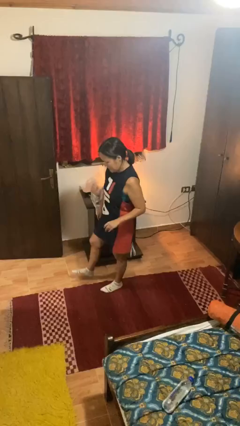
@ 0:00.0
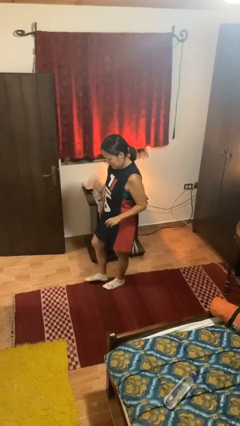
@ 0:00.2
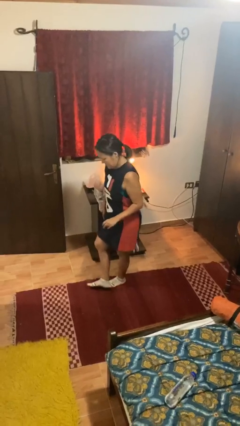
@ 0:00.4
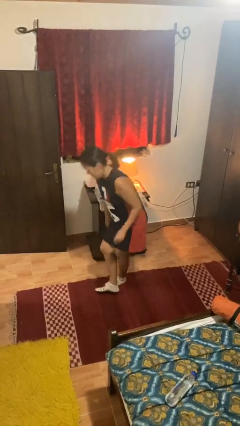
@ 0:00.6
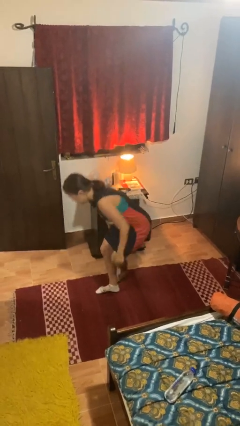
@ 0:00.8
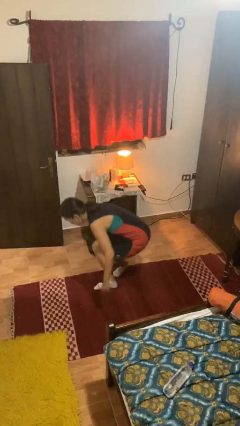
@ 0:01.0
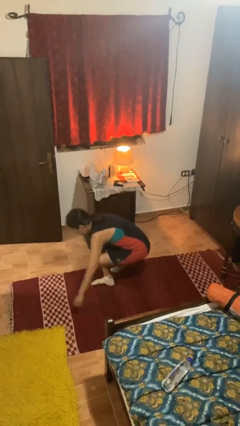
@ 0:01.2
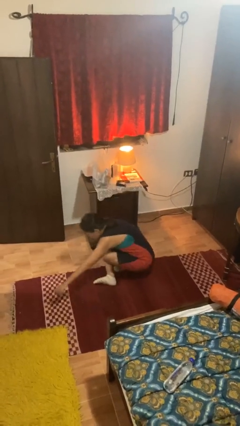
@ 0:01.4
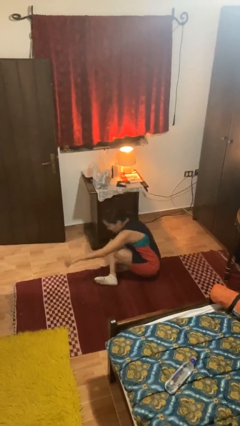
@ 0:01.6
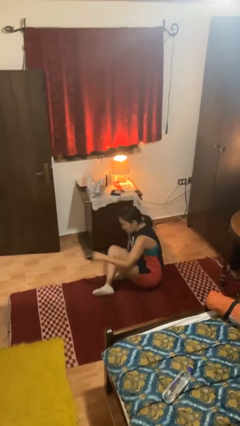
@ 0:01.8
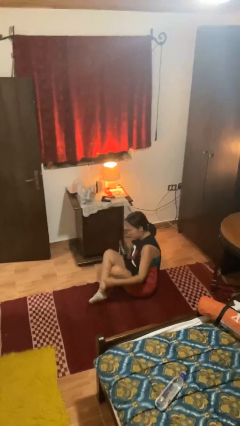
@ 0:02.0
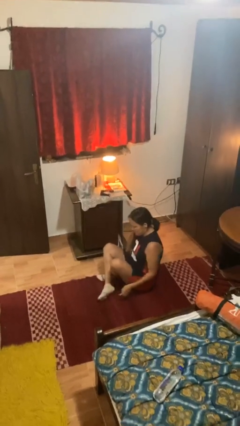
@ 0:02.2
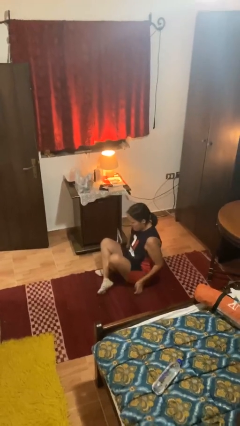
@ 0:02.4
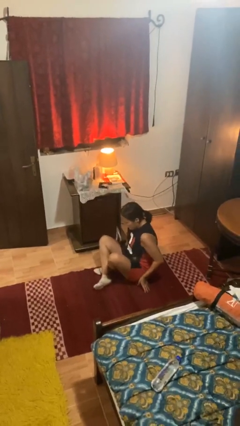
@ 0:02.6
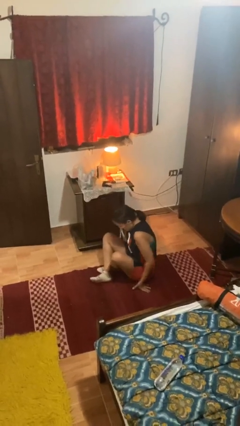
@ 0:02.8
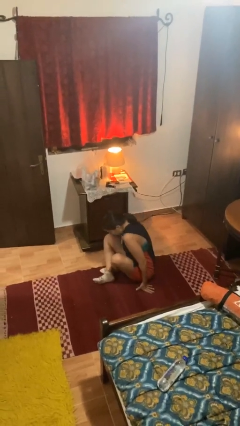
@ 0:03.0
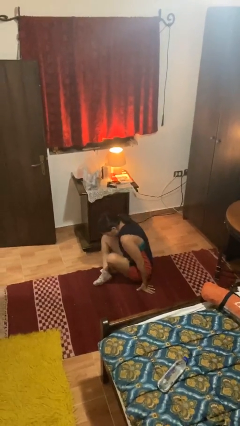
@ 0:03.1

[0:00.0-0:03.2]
person sits crisscross

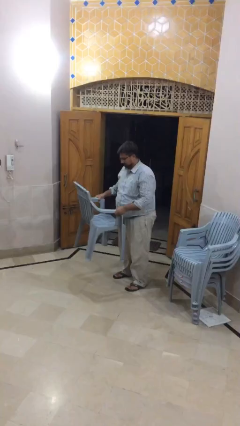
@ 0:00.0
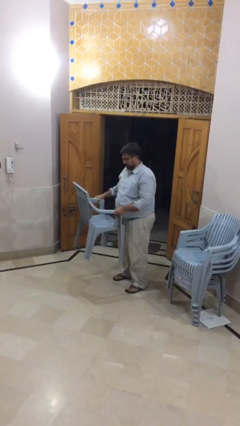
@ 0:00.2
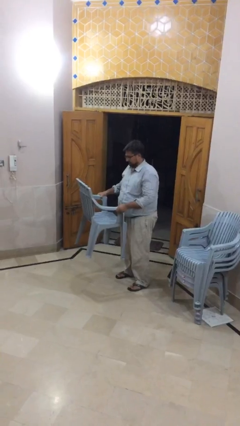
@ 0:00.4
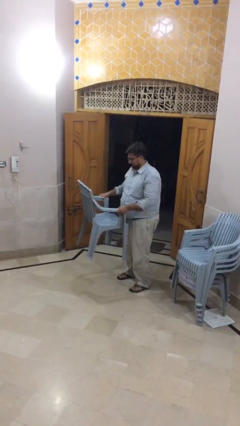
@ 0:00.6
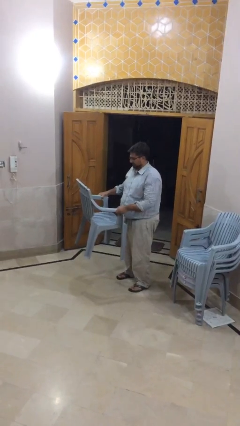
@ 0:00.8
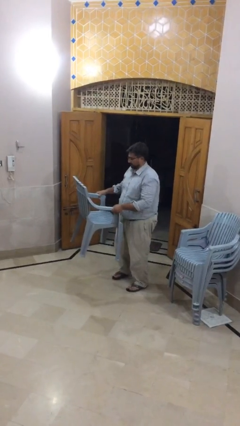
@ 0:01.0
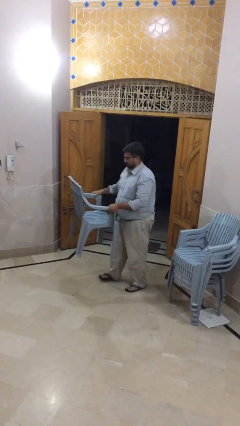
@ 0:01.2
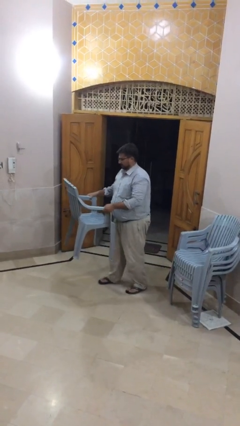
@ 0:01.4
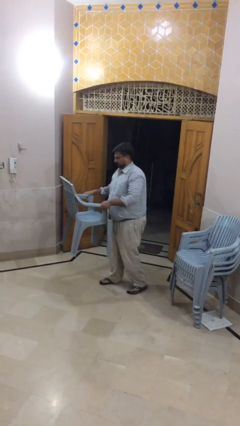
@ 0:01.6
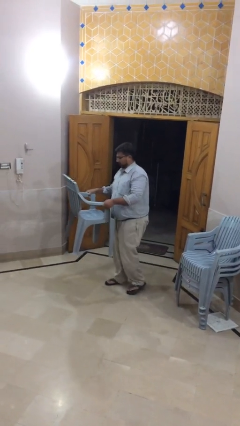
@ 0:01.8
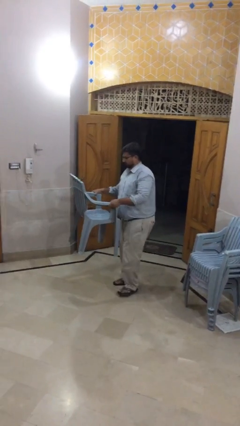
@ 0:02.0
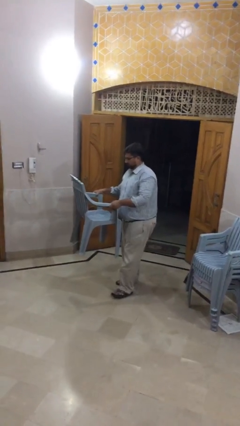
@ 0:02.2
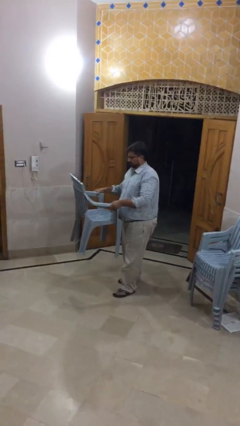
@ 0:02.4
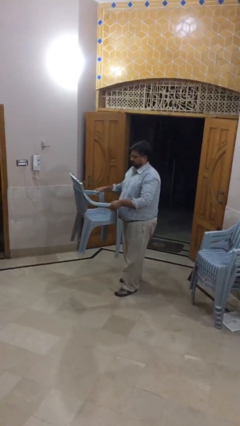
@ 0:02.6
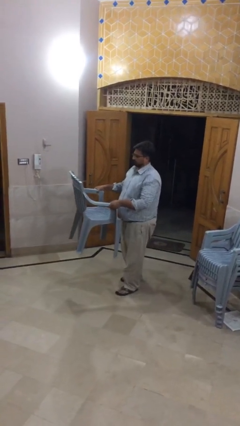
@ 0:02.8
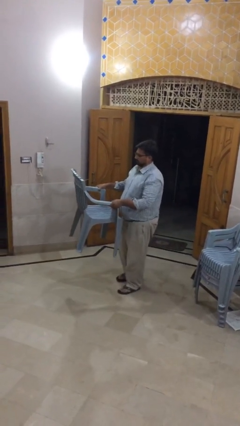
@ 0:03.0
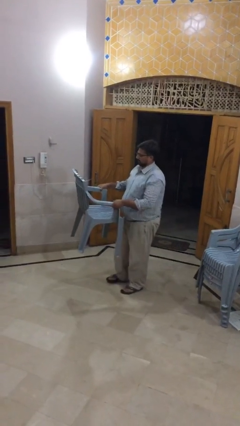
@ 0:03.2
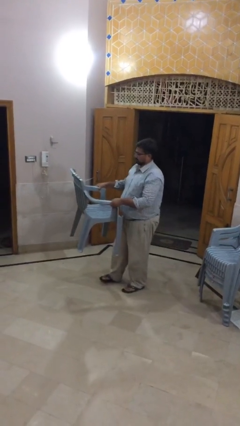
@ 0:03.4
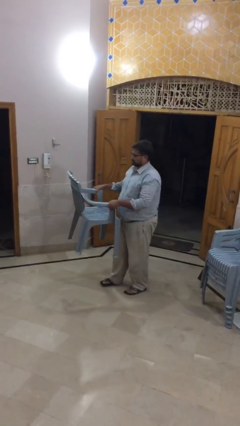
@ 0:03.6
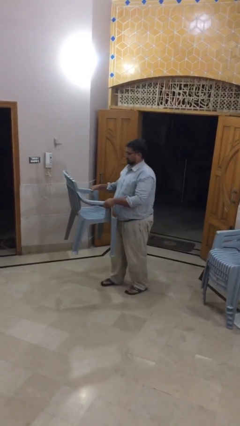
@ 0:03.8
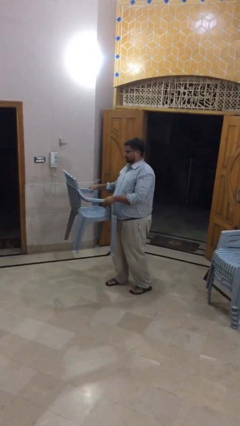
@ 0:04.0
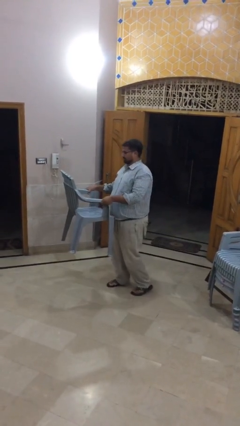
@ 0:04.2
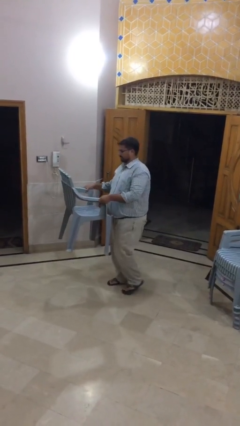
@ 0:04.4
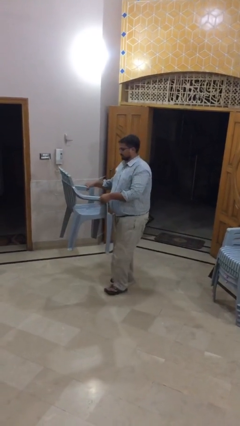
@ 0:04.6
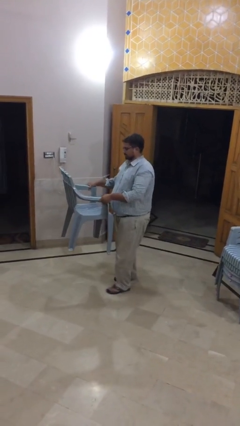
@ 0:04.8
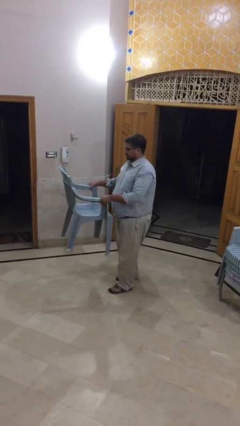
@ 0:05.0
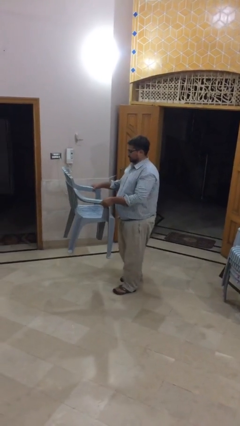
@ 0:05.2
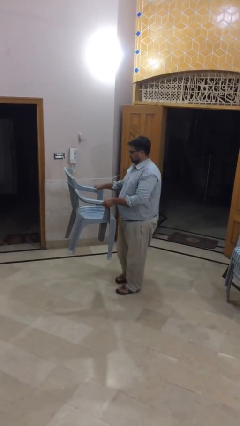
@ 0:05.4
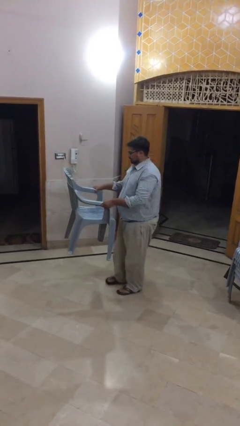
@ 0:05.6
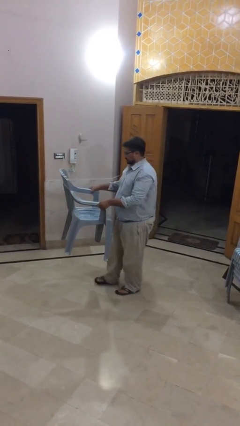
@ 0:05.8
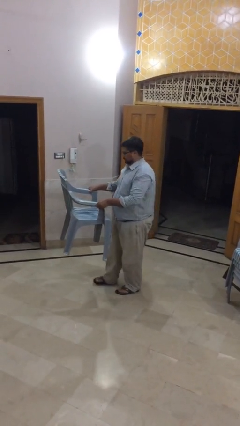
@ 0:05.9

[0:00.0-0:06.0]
person carries heavy object

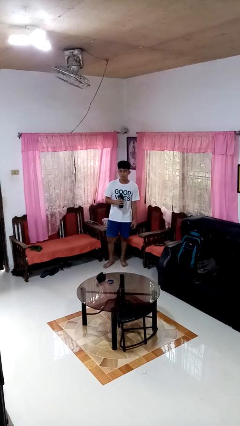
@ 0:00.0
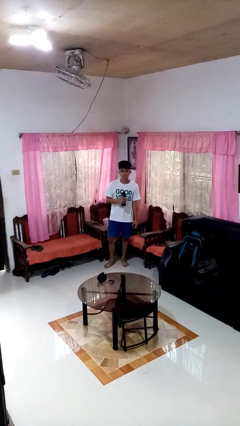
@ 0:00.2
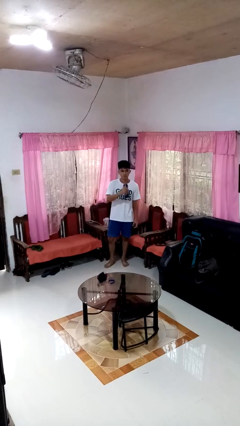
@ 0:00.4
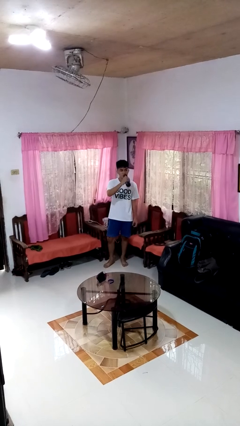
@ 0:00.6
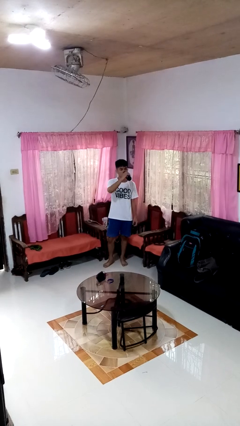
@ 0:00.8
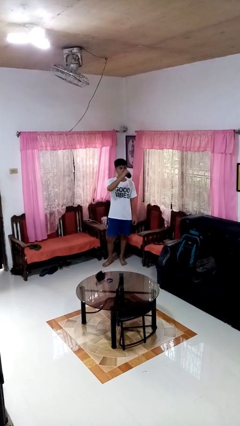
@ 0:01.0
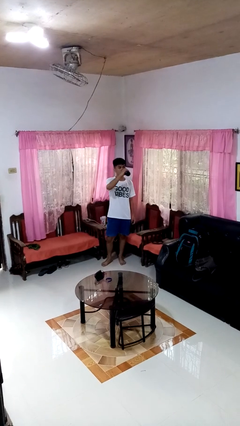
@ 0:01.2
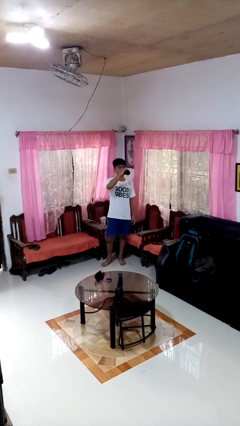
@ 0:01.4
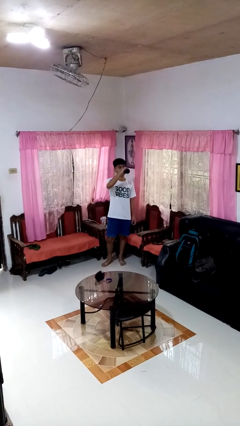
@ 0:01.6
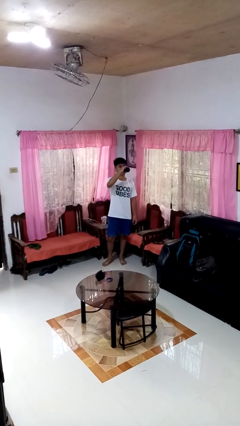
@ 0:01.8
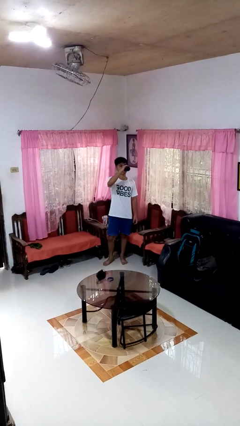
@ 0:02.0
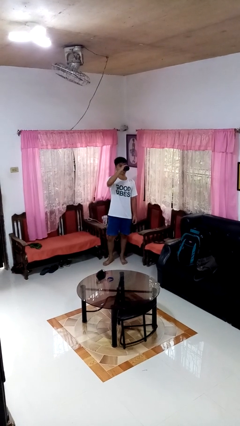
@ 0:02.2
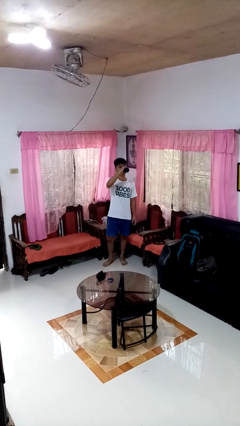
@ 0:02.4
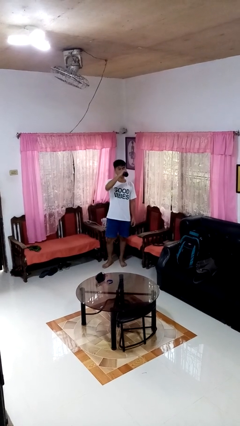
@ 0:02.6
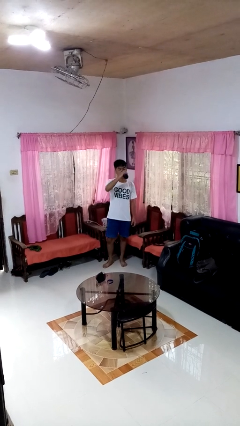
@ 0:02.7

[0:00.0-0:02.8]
person drinks from bottle

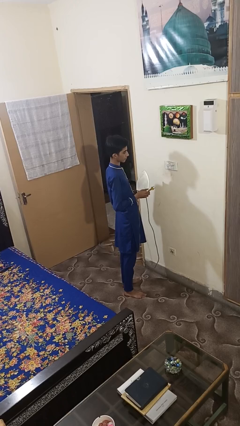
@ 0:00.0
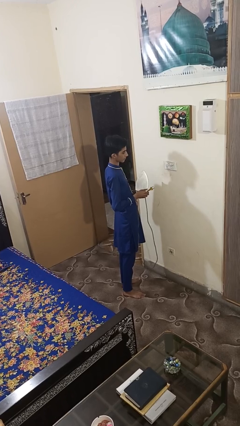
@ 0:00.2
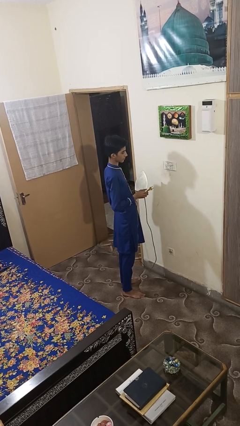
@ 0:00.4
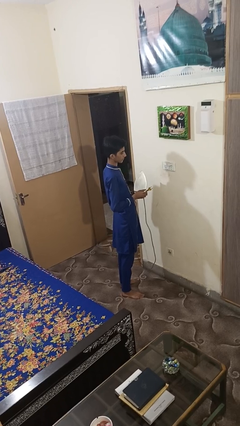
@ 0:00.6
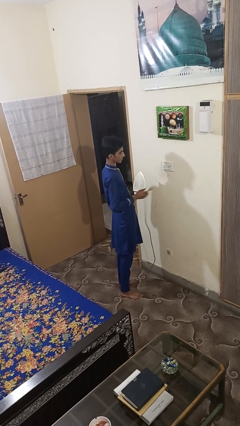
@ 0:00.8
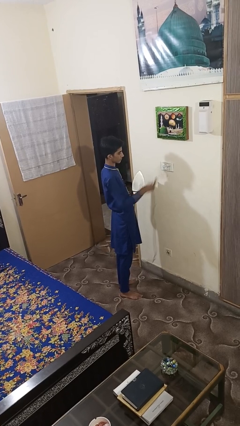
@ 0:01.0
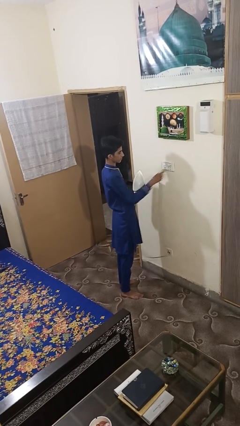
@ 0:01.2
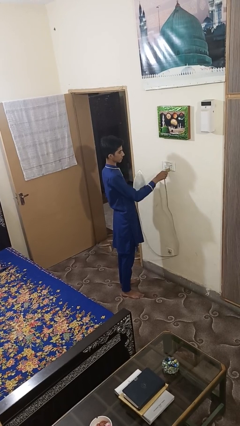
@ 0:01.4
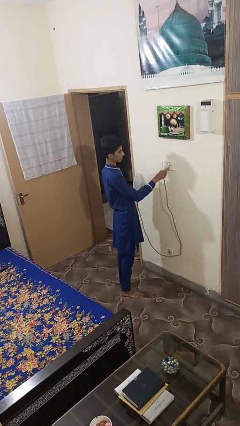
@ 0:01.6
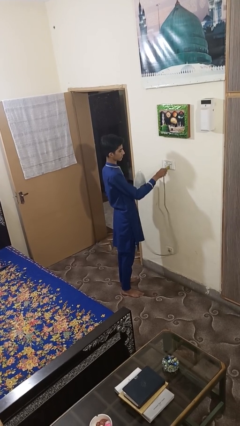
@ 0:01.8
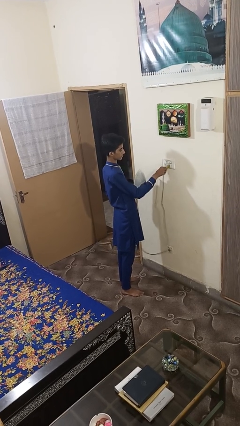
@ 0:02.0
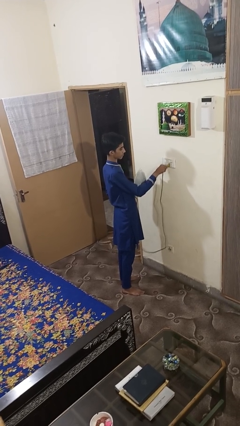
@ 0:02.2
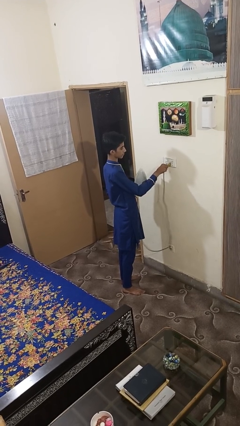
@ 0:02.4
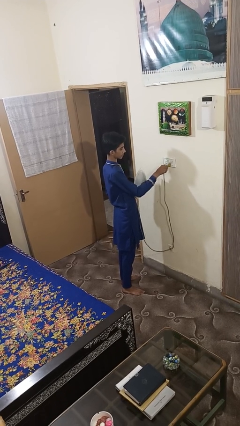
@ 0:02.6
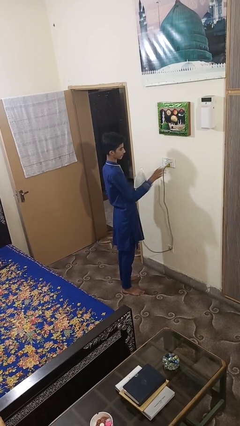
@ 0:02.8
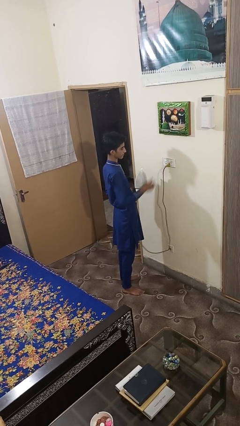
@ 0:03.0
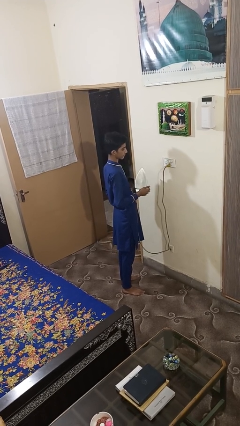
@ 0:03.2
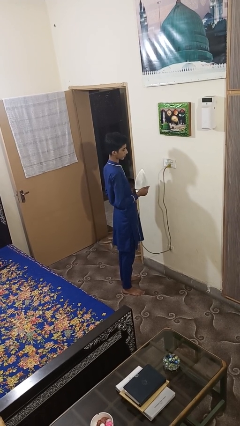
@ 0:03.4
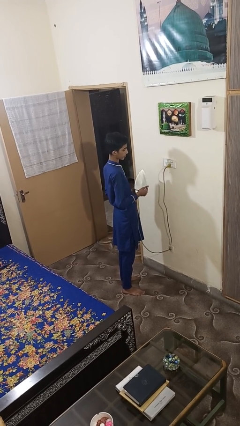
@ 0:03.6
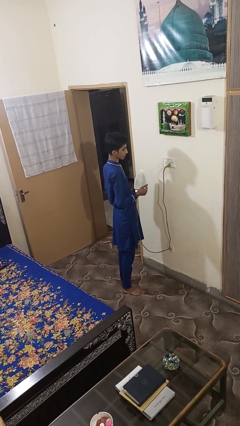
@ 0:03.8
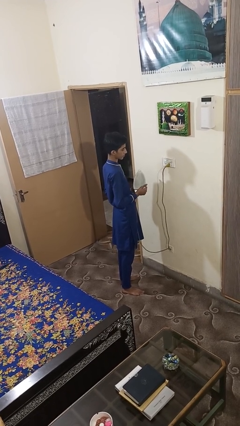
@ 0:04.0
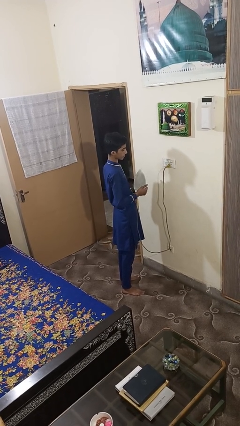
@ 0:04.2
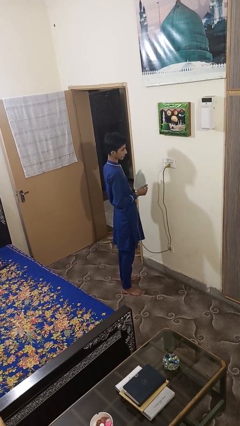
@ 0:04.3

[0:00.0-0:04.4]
person plugs into electrical socket

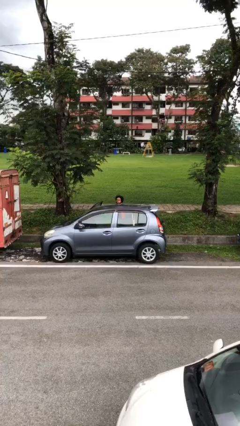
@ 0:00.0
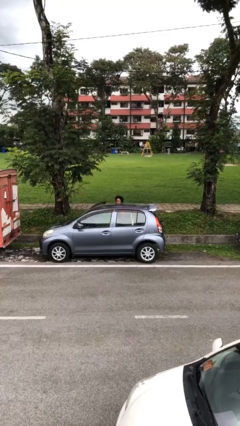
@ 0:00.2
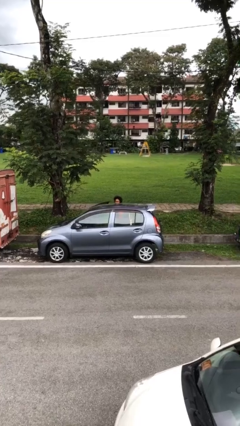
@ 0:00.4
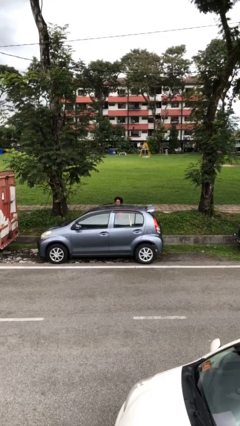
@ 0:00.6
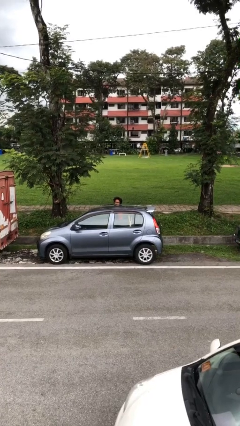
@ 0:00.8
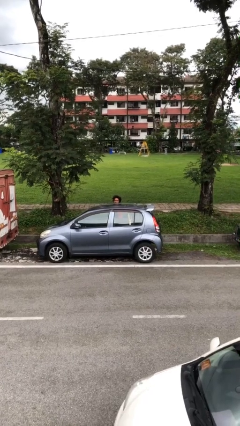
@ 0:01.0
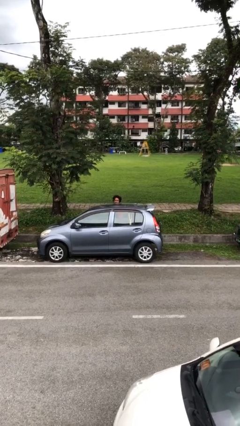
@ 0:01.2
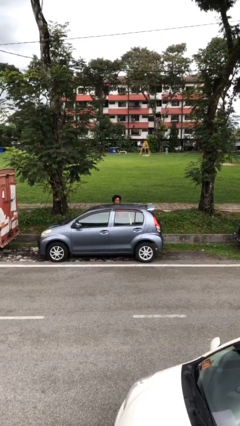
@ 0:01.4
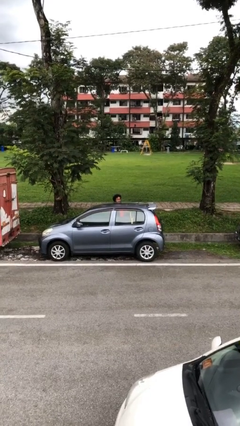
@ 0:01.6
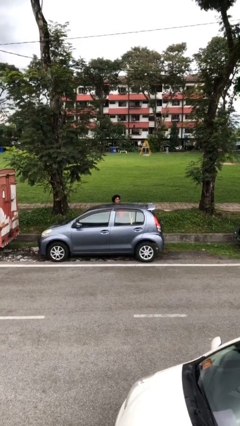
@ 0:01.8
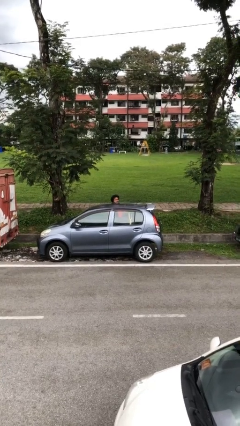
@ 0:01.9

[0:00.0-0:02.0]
person closes car door
